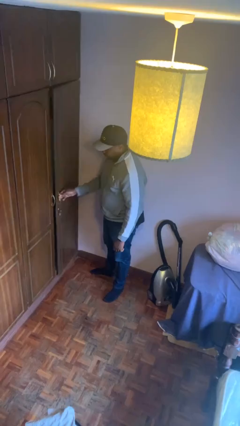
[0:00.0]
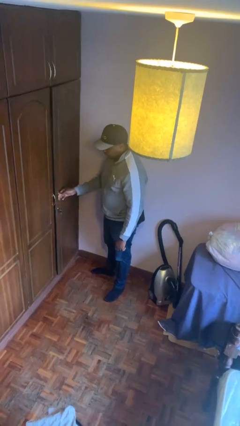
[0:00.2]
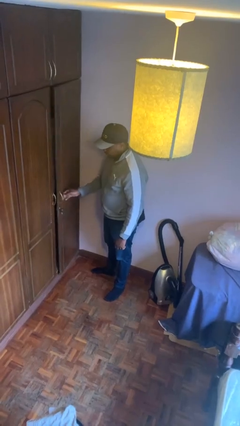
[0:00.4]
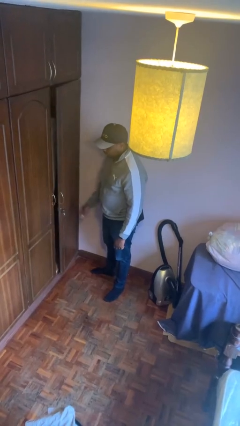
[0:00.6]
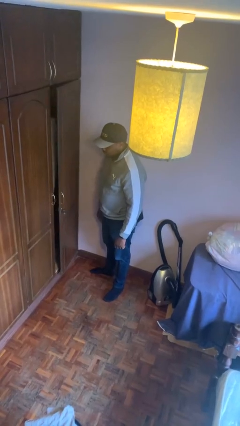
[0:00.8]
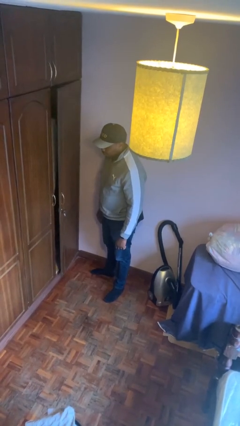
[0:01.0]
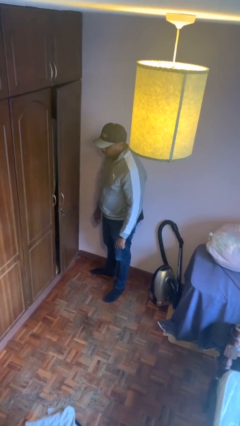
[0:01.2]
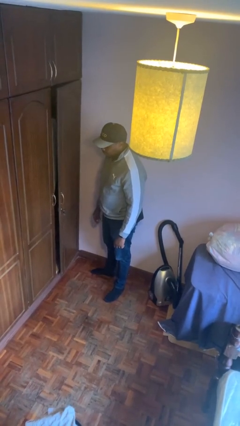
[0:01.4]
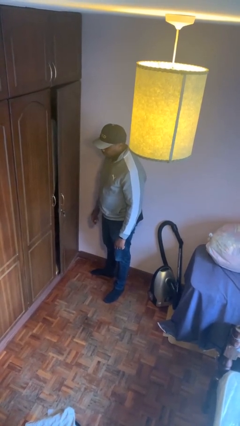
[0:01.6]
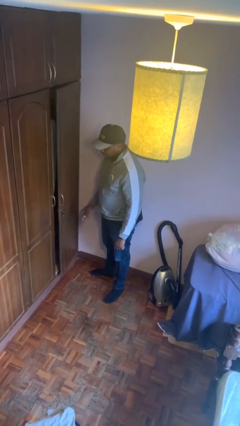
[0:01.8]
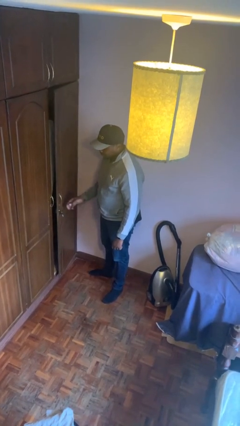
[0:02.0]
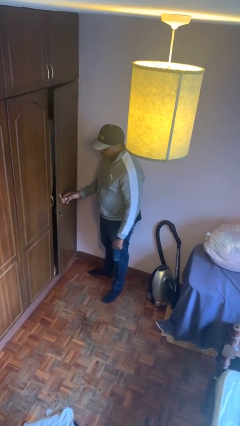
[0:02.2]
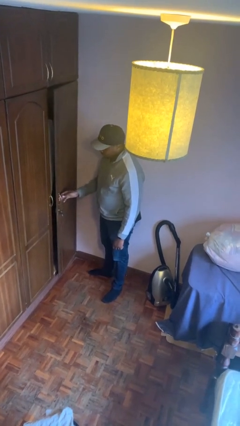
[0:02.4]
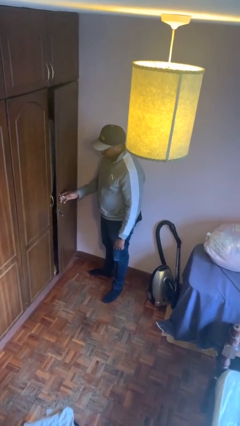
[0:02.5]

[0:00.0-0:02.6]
person closes closet door

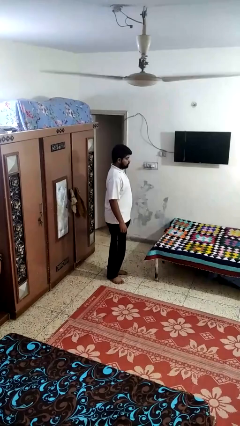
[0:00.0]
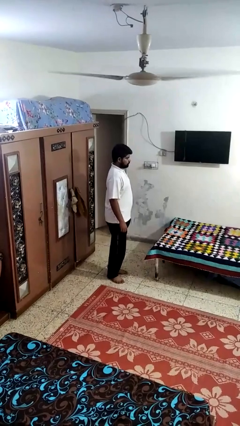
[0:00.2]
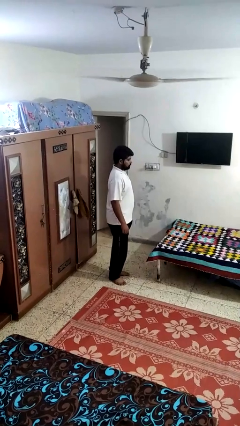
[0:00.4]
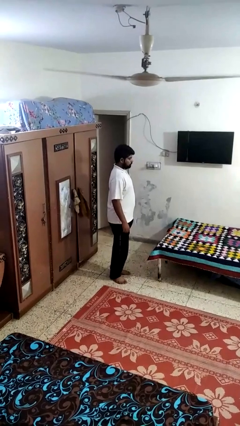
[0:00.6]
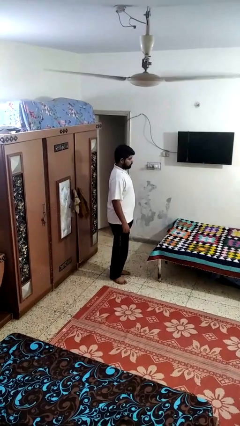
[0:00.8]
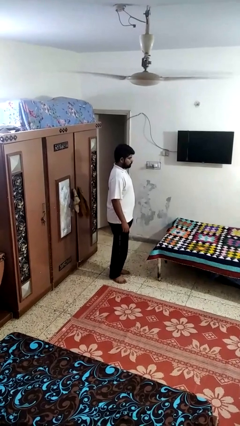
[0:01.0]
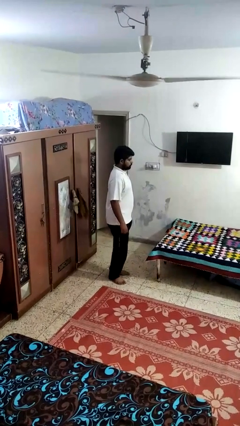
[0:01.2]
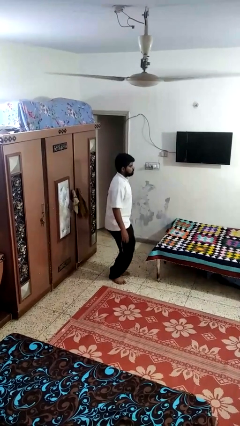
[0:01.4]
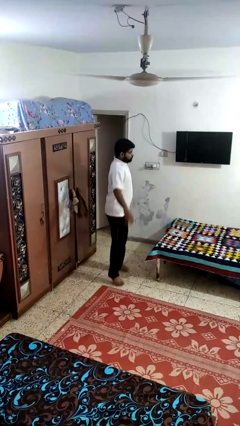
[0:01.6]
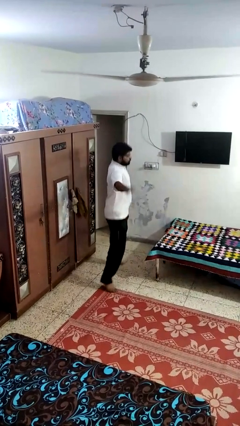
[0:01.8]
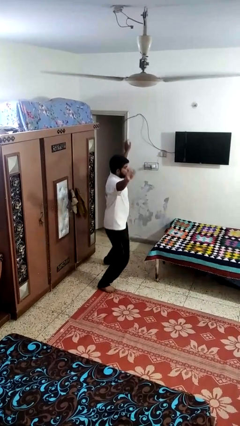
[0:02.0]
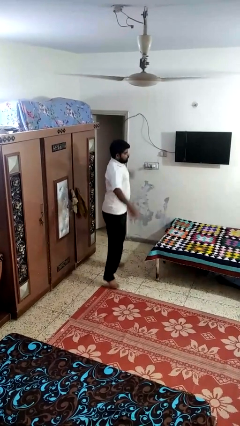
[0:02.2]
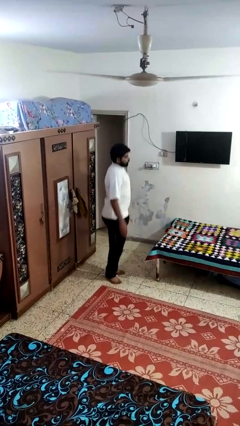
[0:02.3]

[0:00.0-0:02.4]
person exercises with jumping jacks

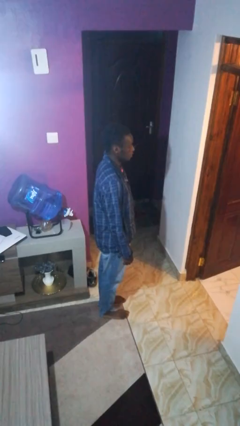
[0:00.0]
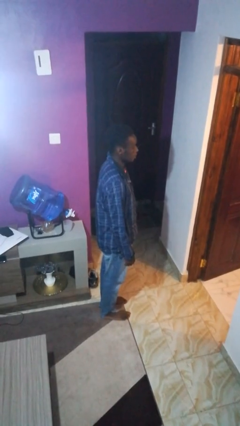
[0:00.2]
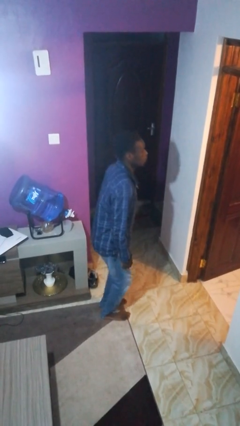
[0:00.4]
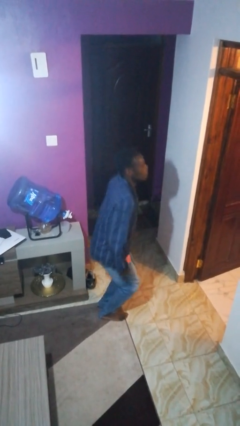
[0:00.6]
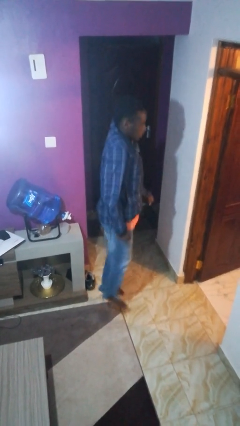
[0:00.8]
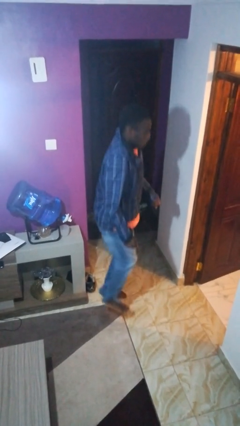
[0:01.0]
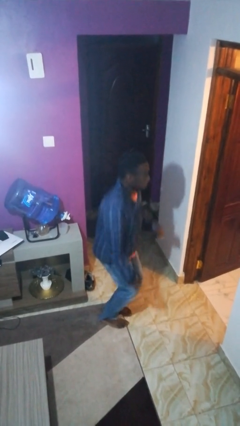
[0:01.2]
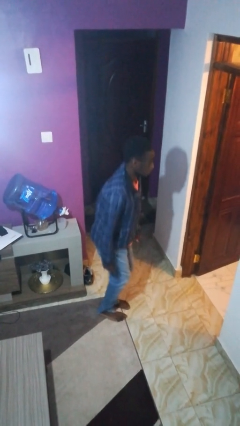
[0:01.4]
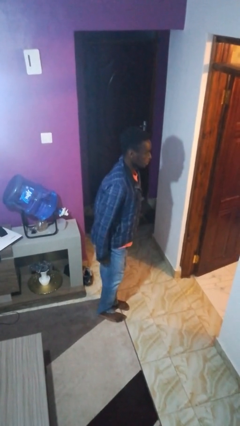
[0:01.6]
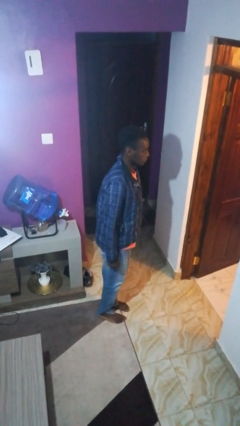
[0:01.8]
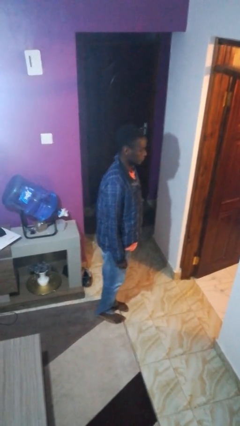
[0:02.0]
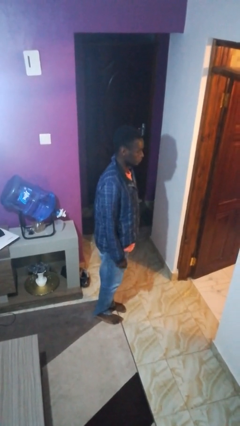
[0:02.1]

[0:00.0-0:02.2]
person jumps

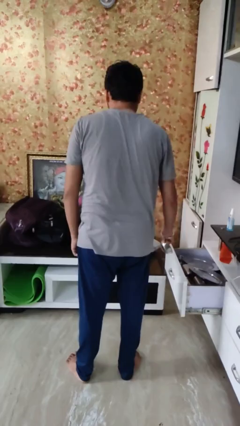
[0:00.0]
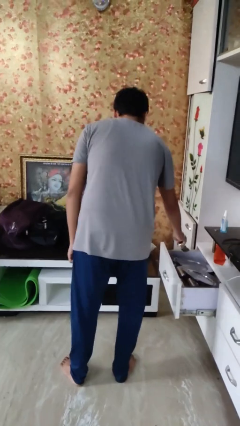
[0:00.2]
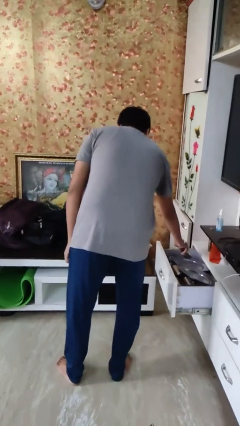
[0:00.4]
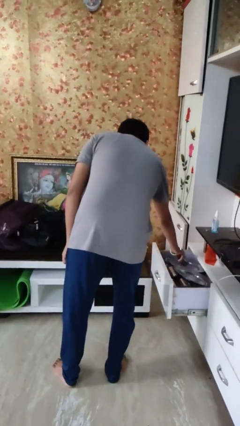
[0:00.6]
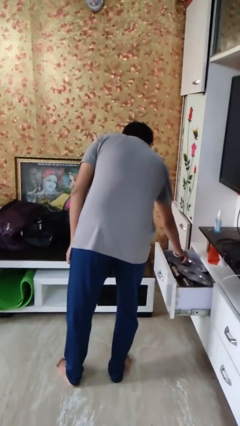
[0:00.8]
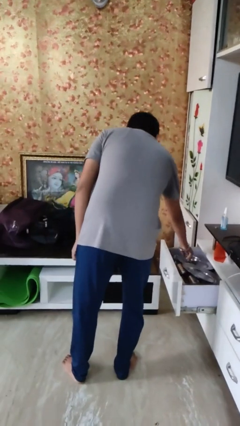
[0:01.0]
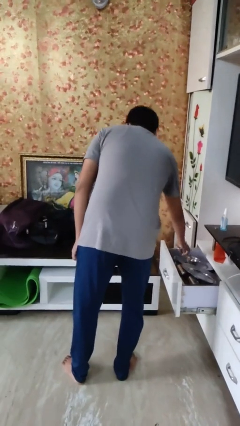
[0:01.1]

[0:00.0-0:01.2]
person puts object into kitchen drawer

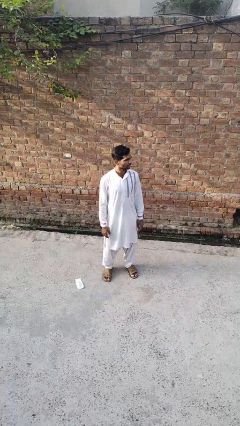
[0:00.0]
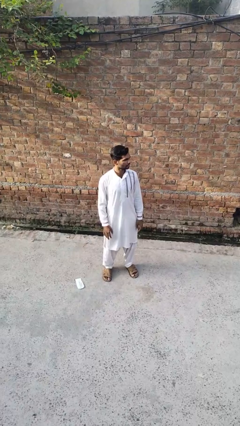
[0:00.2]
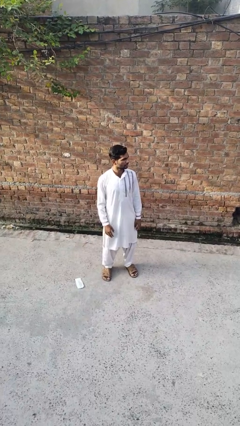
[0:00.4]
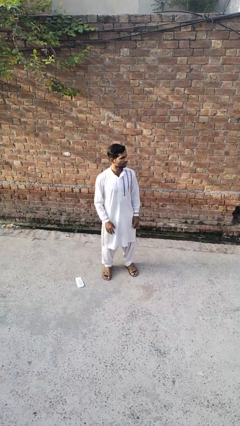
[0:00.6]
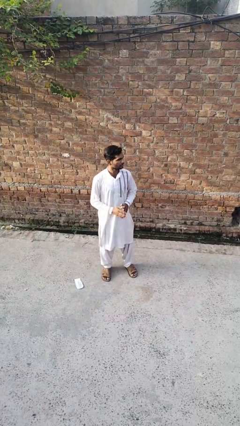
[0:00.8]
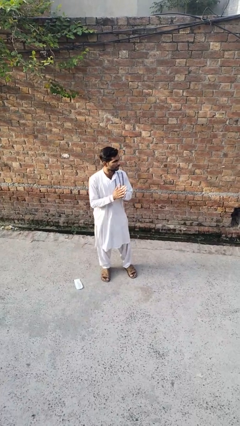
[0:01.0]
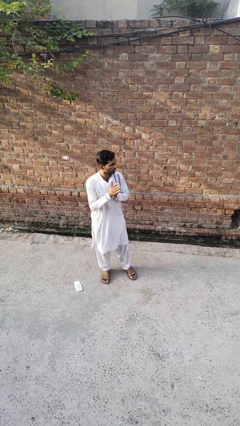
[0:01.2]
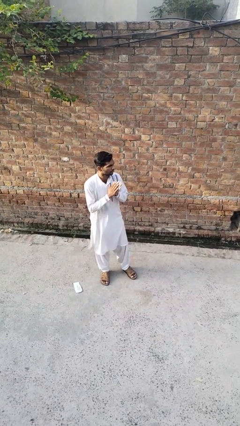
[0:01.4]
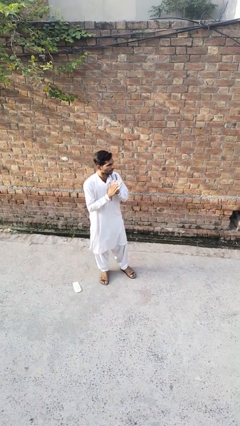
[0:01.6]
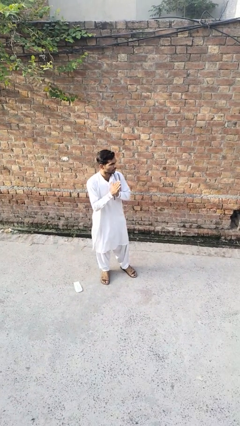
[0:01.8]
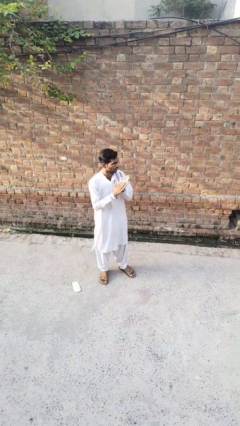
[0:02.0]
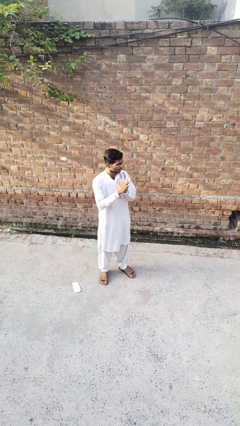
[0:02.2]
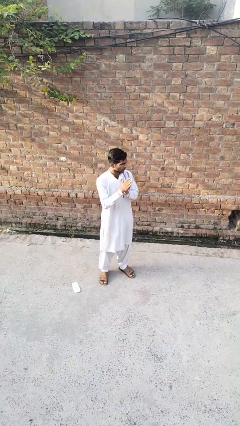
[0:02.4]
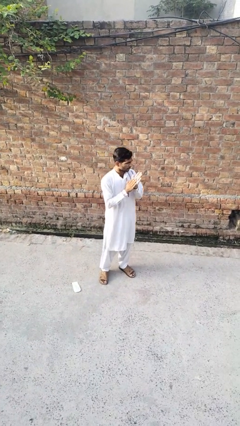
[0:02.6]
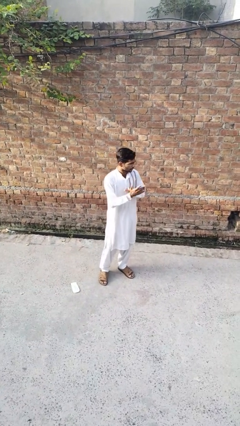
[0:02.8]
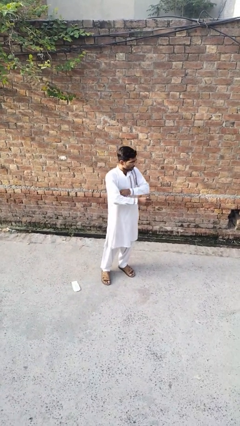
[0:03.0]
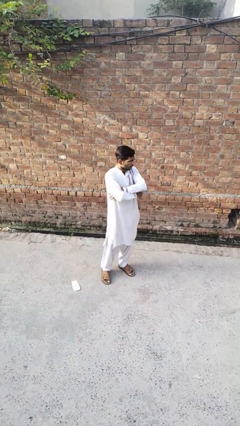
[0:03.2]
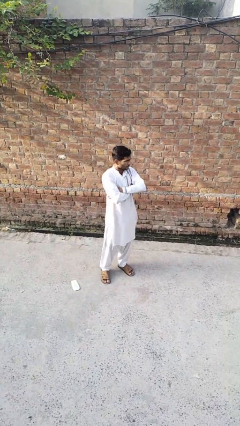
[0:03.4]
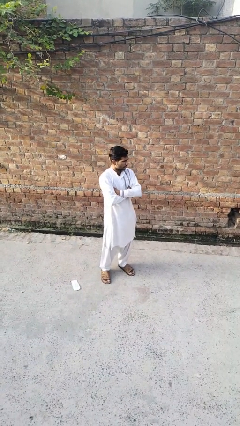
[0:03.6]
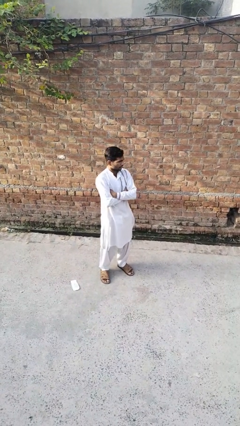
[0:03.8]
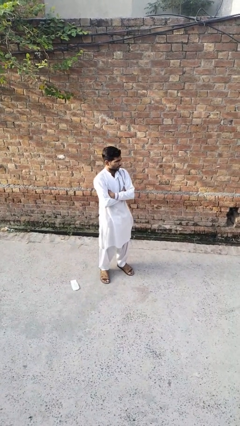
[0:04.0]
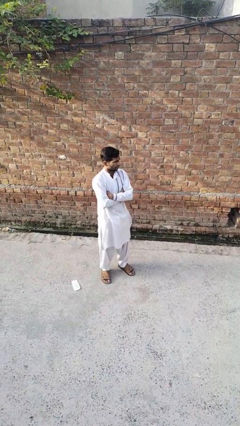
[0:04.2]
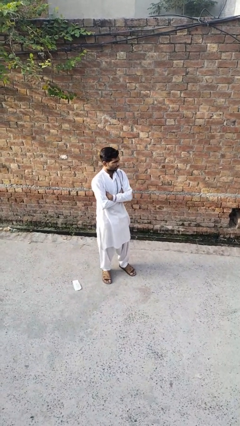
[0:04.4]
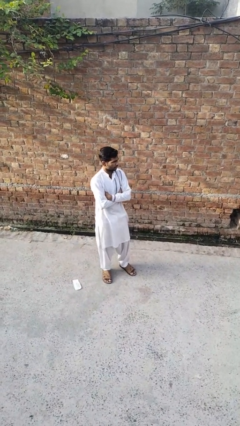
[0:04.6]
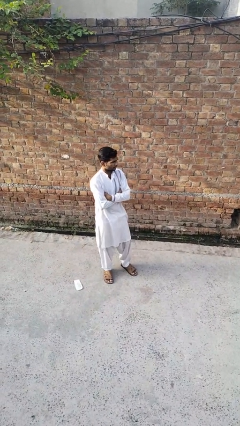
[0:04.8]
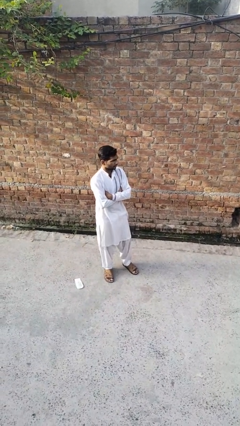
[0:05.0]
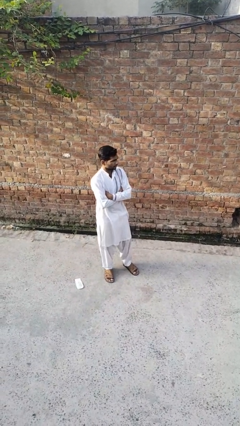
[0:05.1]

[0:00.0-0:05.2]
person blows into hands

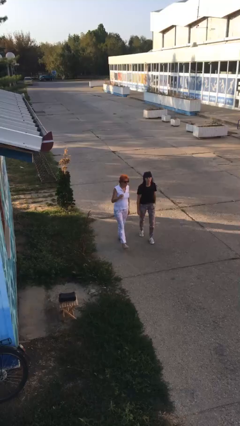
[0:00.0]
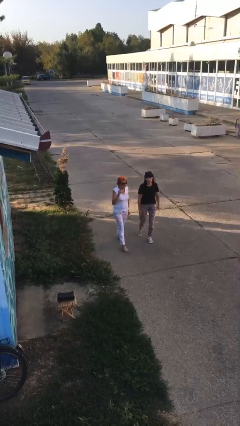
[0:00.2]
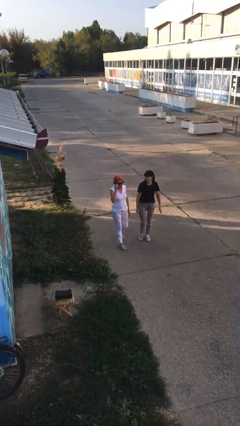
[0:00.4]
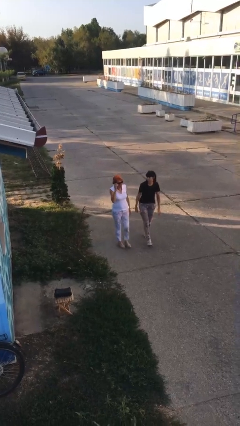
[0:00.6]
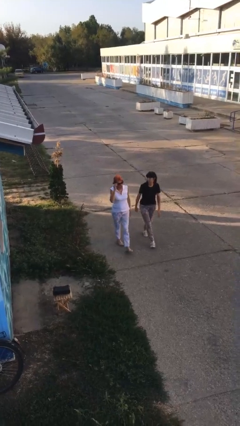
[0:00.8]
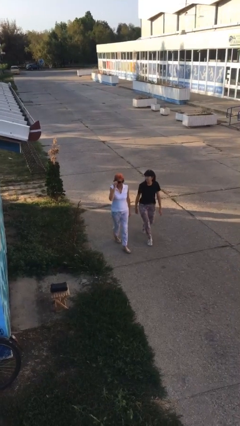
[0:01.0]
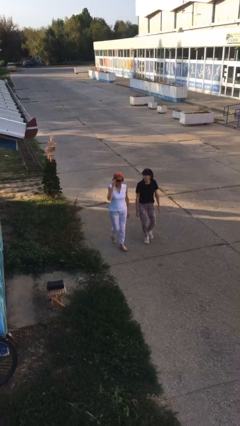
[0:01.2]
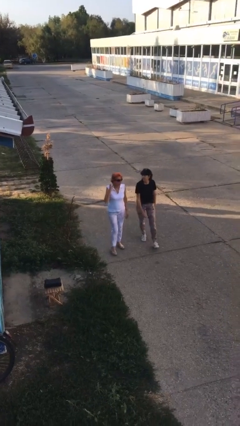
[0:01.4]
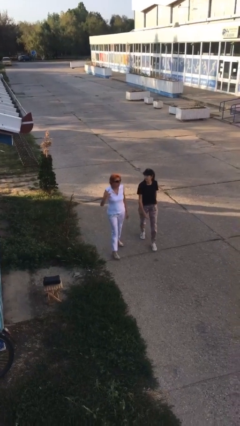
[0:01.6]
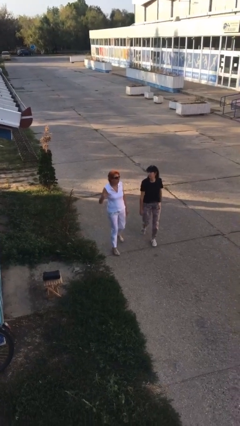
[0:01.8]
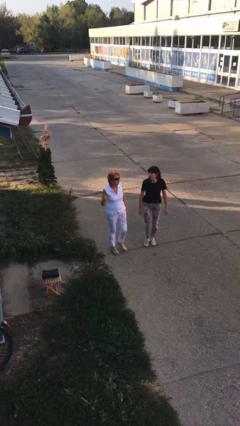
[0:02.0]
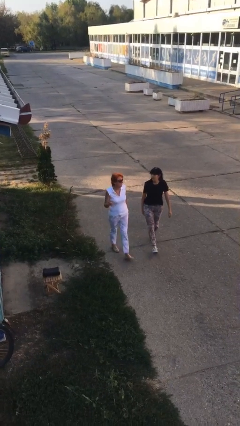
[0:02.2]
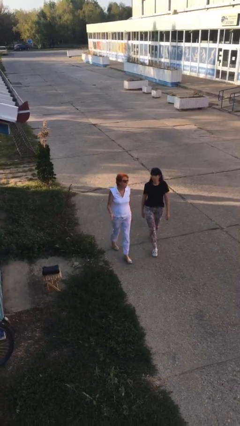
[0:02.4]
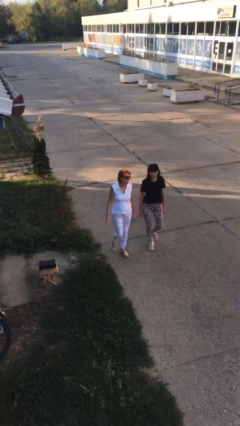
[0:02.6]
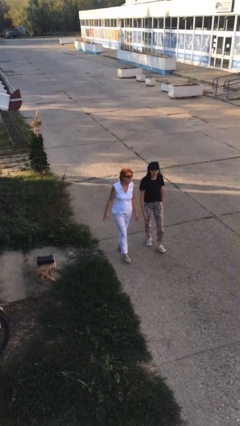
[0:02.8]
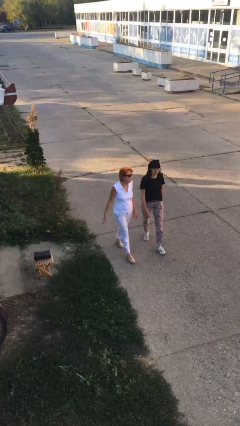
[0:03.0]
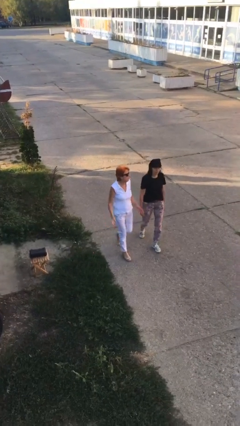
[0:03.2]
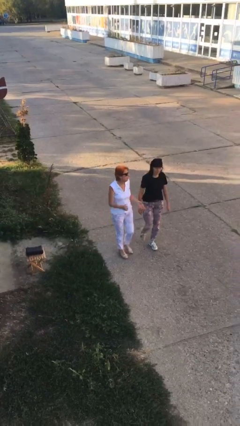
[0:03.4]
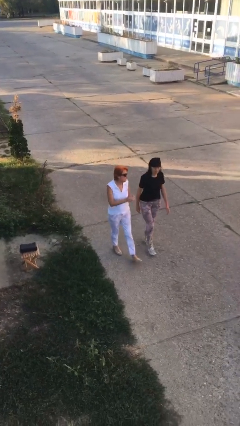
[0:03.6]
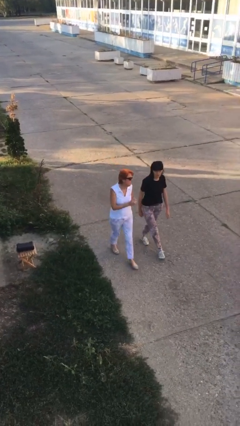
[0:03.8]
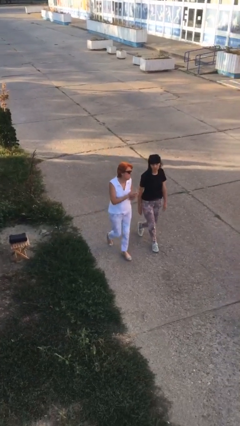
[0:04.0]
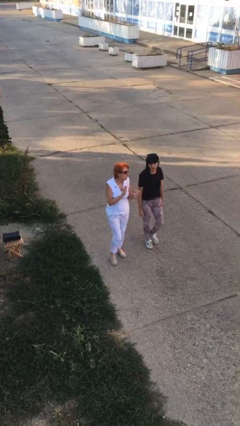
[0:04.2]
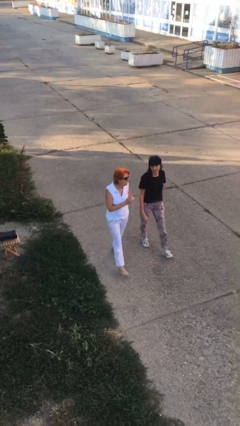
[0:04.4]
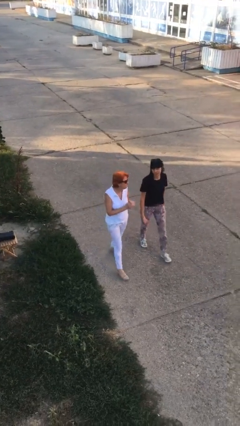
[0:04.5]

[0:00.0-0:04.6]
person talks to person
